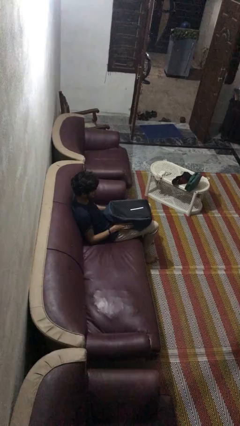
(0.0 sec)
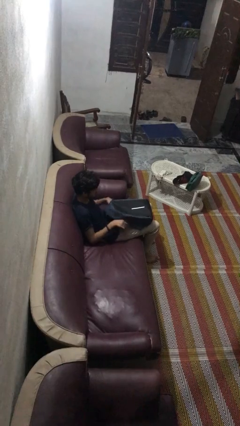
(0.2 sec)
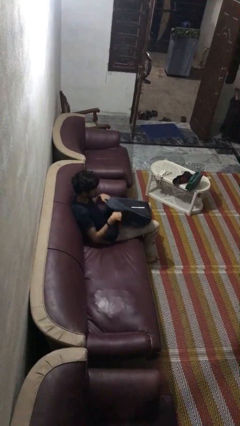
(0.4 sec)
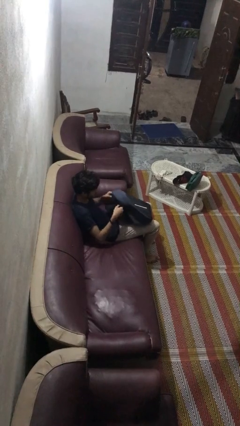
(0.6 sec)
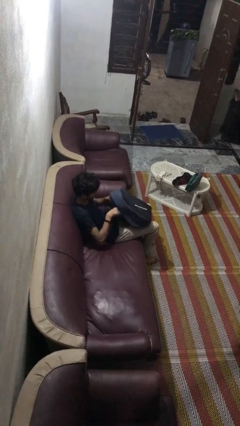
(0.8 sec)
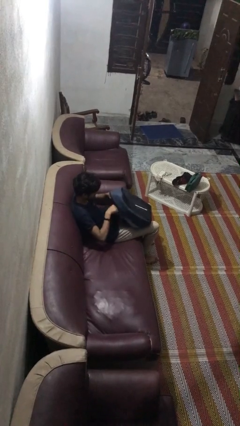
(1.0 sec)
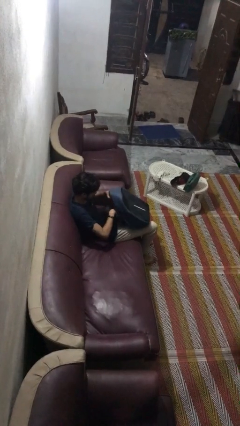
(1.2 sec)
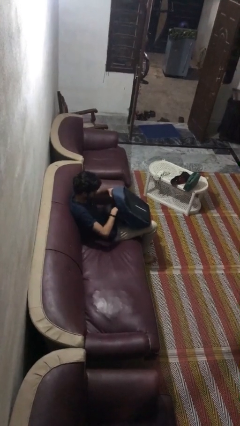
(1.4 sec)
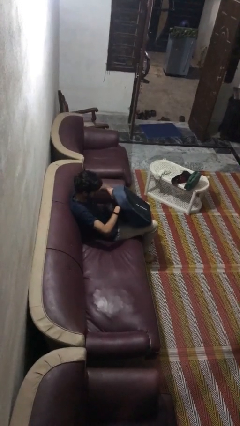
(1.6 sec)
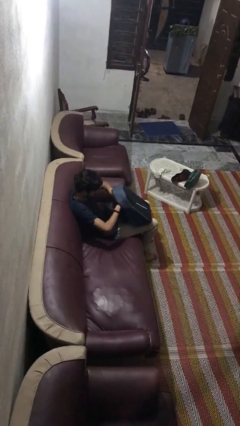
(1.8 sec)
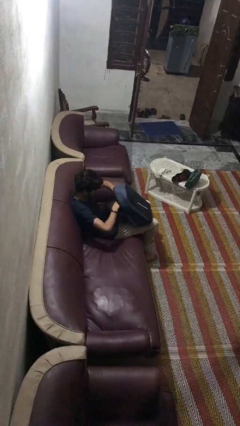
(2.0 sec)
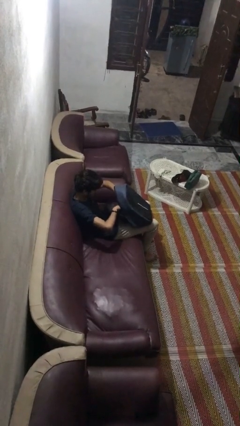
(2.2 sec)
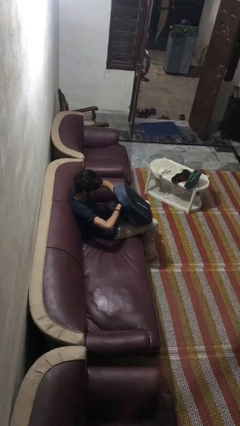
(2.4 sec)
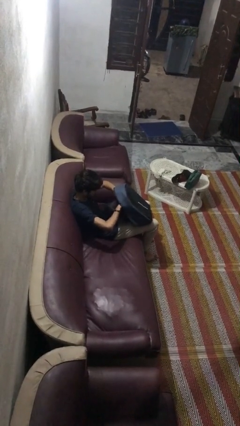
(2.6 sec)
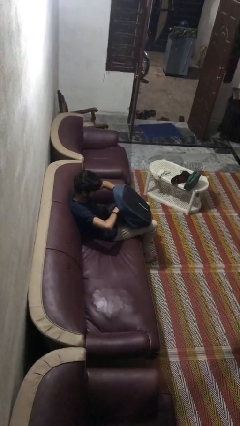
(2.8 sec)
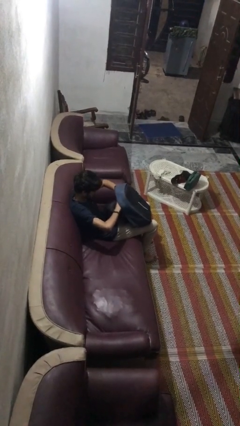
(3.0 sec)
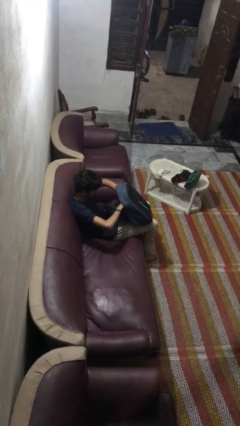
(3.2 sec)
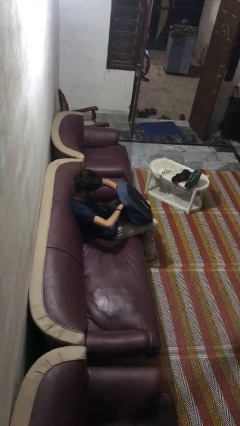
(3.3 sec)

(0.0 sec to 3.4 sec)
person searches in backpack

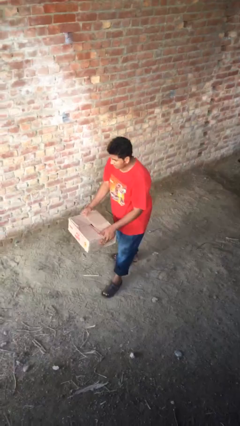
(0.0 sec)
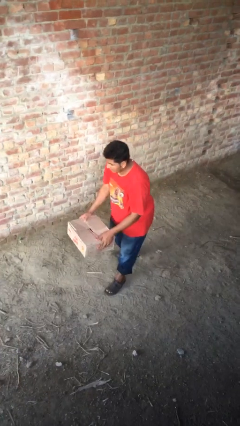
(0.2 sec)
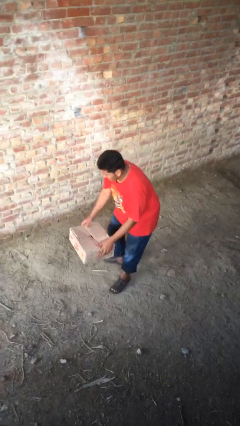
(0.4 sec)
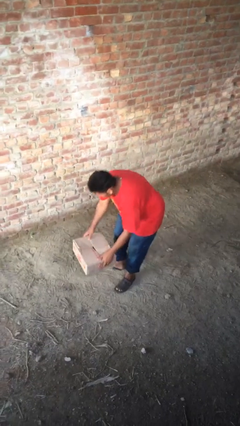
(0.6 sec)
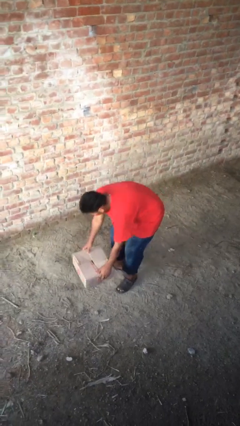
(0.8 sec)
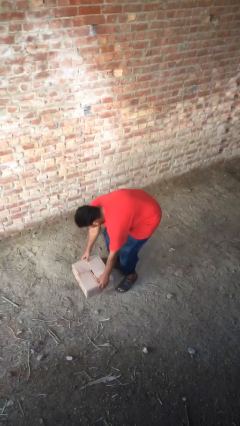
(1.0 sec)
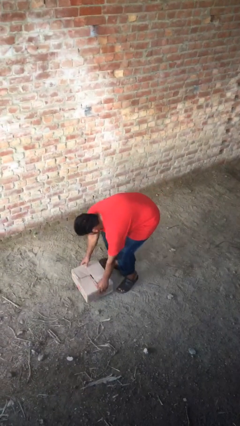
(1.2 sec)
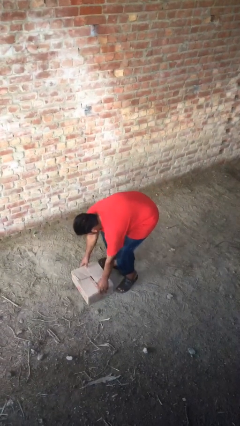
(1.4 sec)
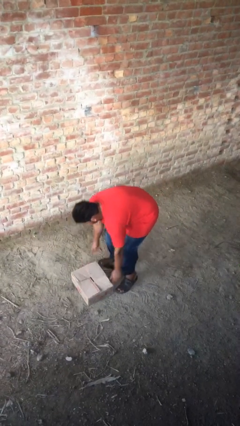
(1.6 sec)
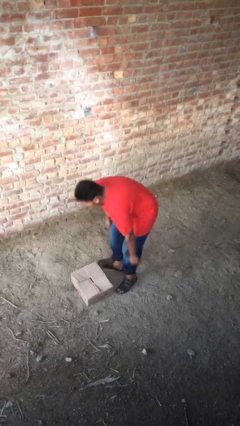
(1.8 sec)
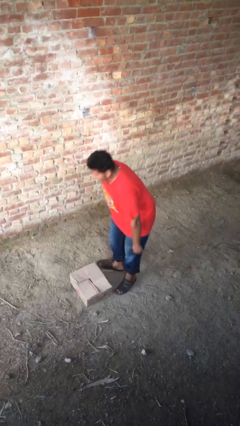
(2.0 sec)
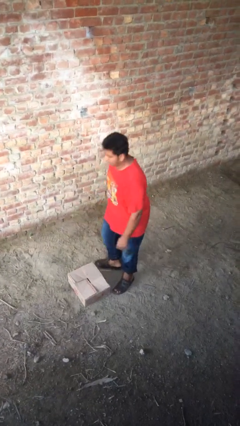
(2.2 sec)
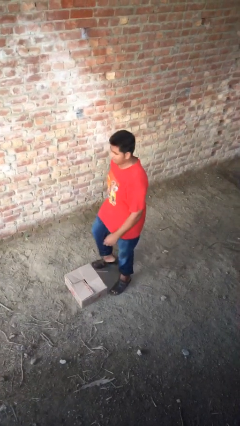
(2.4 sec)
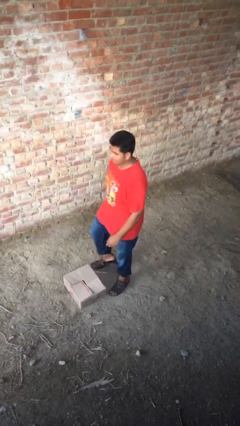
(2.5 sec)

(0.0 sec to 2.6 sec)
person puts down object on floor

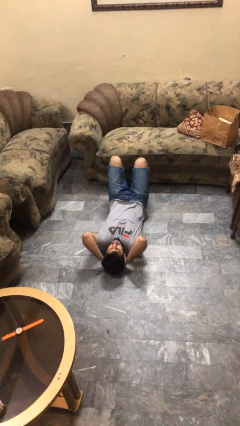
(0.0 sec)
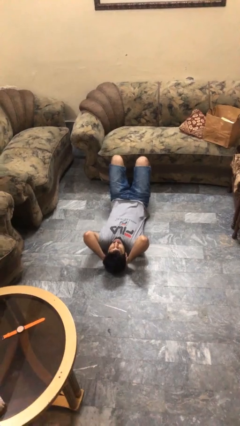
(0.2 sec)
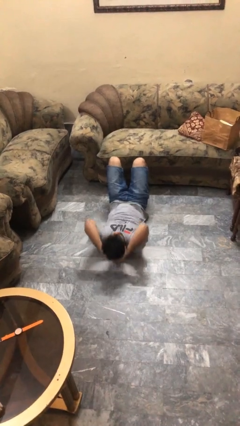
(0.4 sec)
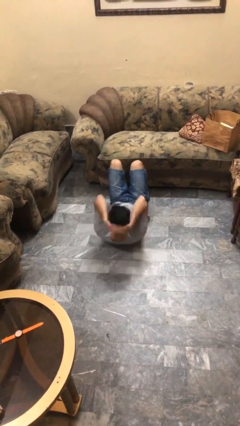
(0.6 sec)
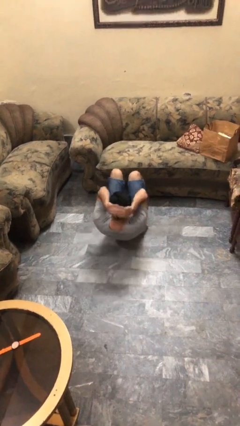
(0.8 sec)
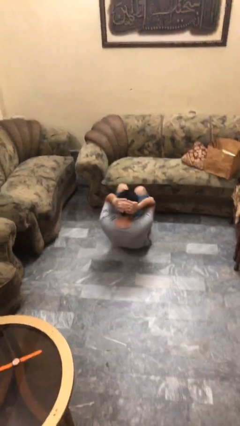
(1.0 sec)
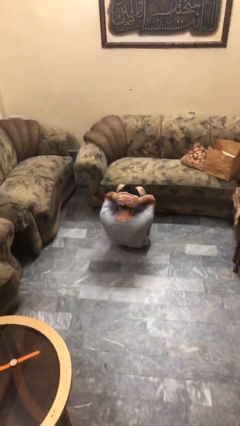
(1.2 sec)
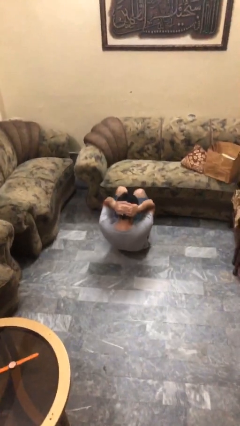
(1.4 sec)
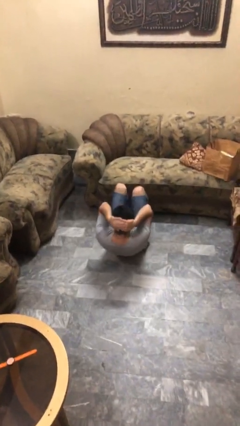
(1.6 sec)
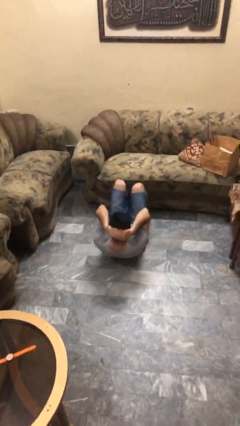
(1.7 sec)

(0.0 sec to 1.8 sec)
person exercises with situp

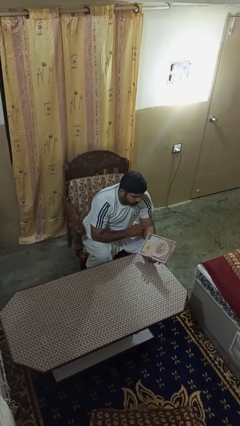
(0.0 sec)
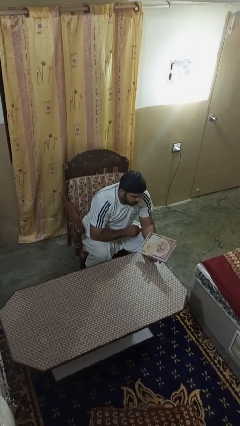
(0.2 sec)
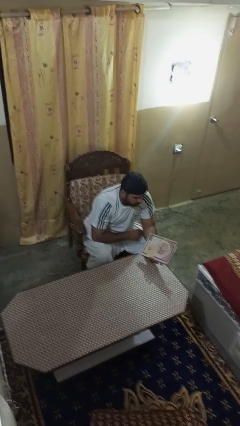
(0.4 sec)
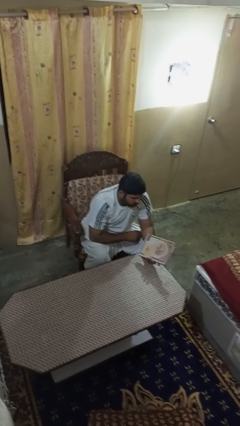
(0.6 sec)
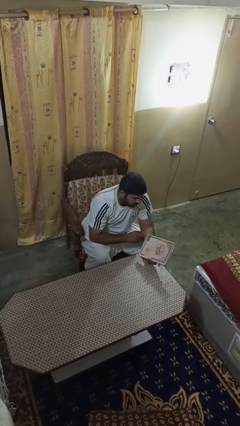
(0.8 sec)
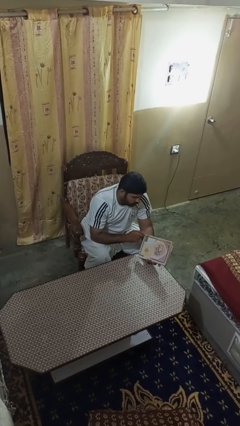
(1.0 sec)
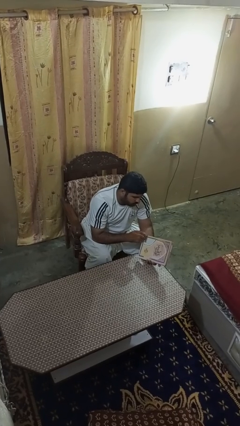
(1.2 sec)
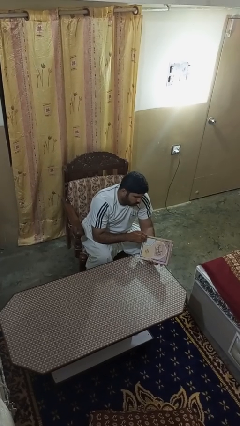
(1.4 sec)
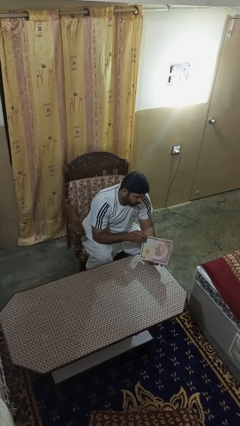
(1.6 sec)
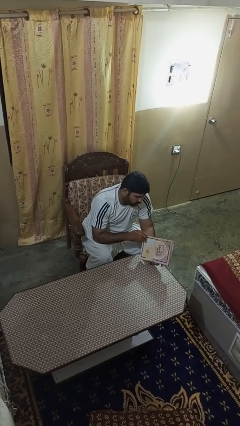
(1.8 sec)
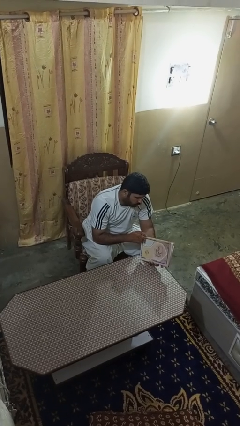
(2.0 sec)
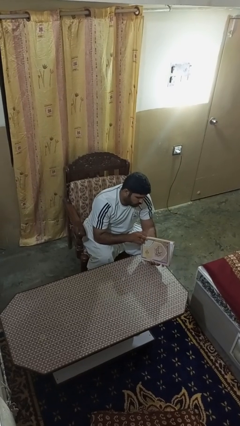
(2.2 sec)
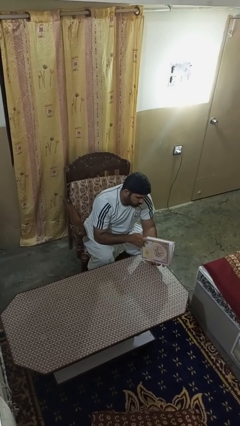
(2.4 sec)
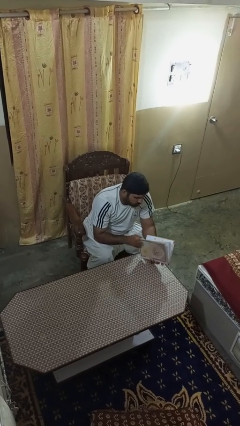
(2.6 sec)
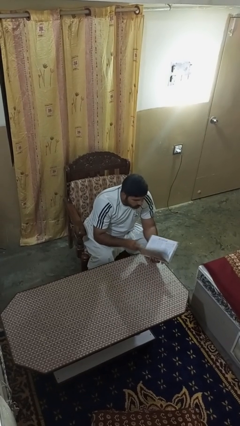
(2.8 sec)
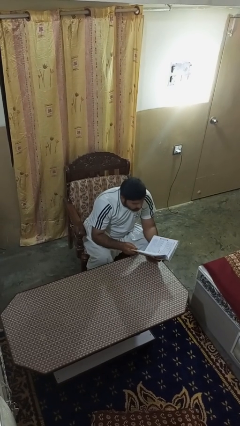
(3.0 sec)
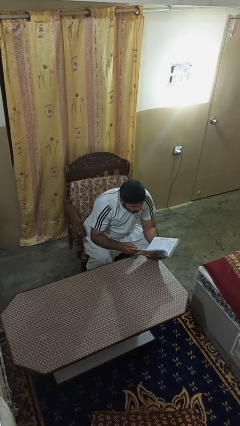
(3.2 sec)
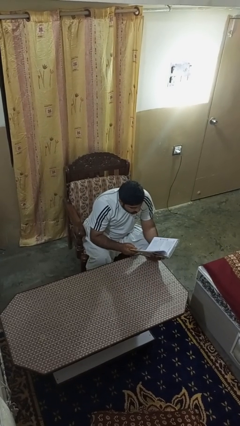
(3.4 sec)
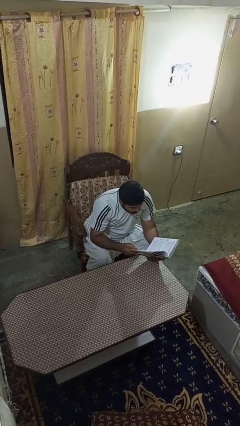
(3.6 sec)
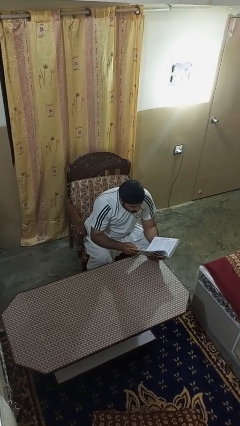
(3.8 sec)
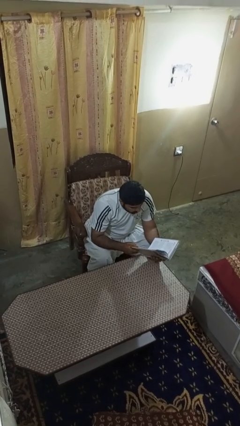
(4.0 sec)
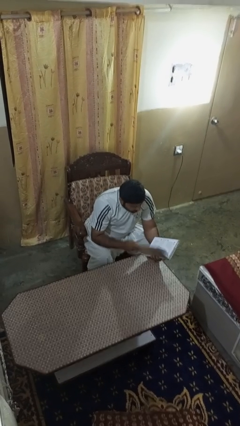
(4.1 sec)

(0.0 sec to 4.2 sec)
person reads book

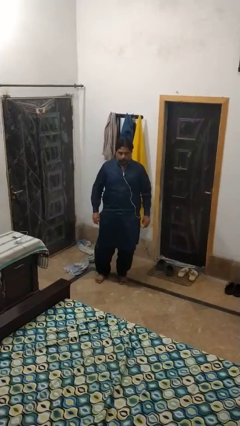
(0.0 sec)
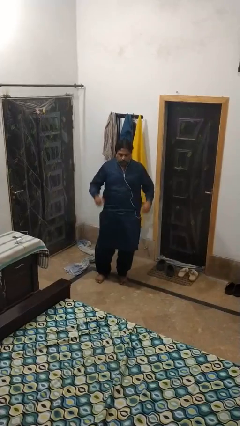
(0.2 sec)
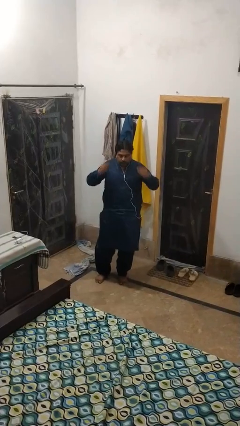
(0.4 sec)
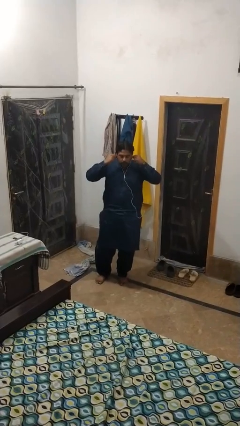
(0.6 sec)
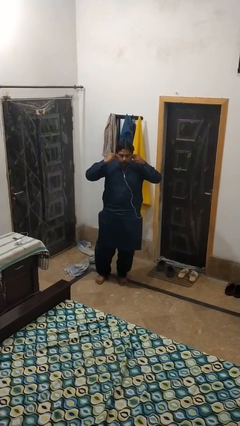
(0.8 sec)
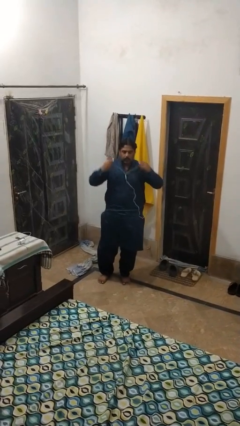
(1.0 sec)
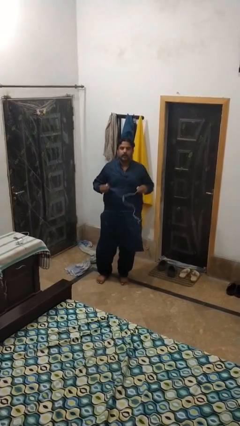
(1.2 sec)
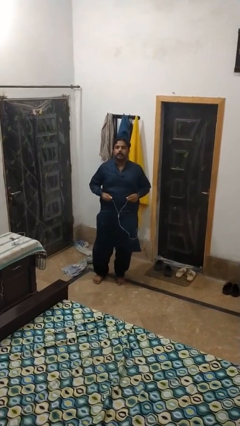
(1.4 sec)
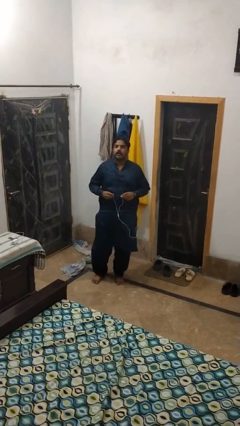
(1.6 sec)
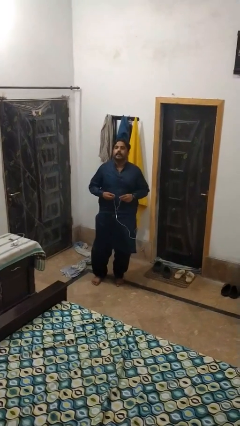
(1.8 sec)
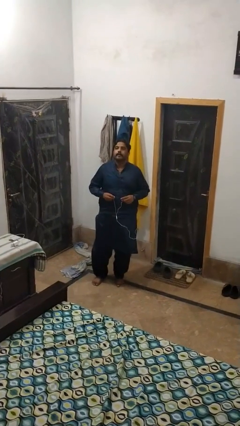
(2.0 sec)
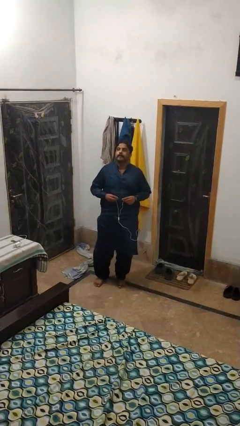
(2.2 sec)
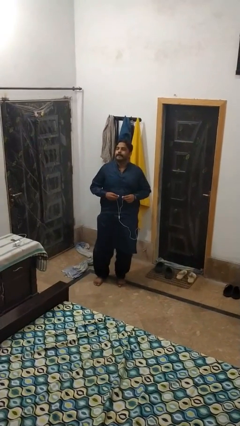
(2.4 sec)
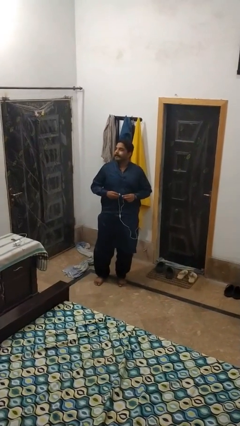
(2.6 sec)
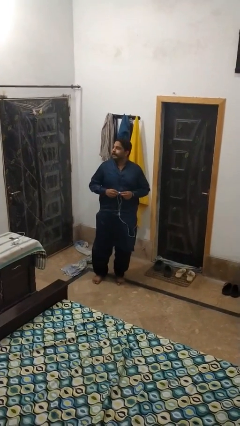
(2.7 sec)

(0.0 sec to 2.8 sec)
person takes off headphones

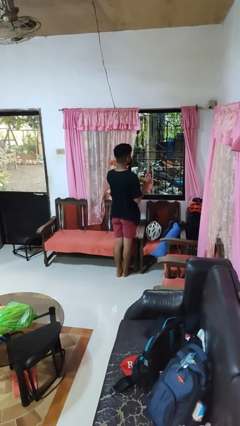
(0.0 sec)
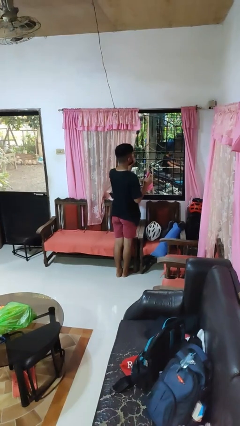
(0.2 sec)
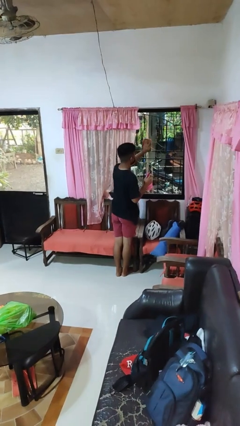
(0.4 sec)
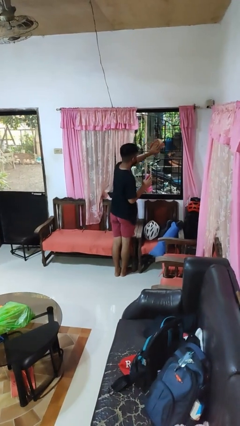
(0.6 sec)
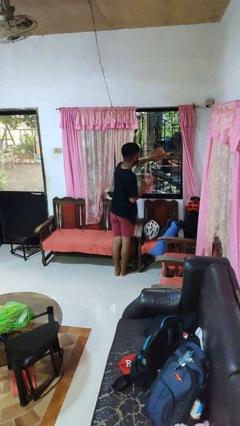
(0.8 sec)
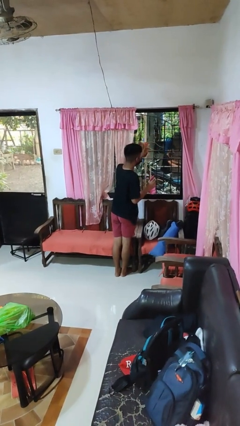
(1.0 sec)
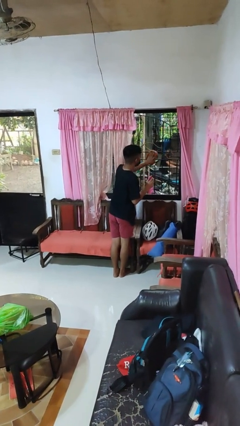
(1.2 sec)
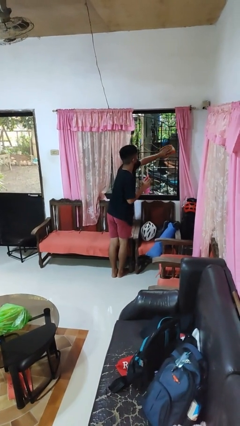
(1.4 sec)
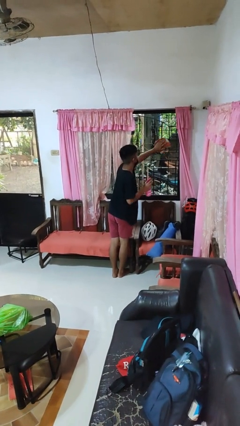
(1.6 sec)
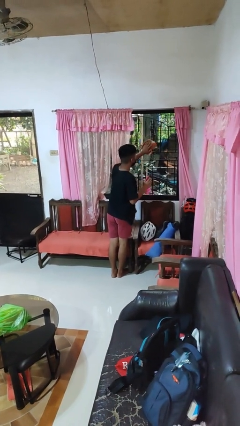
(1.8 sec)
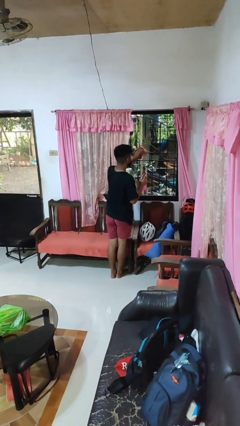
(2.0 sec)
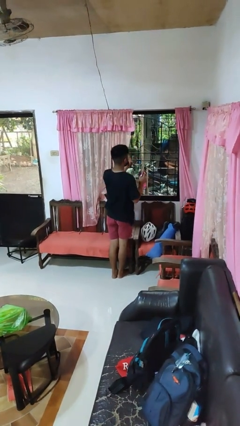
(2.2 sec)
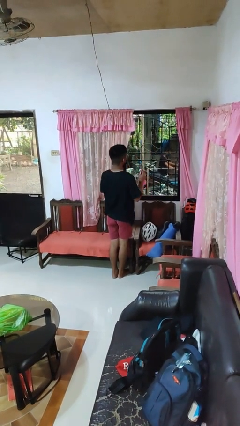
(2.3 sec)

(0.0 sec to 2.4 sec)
person washes window
